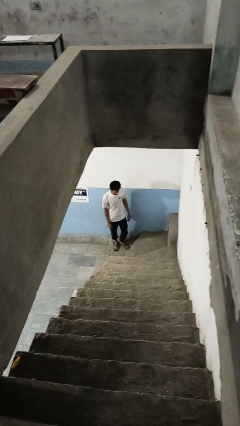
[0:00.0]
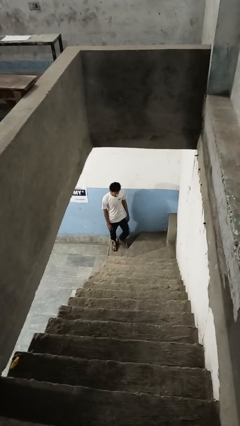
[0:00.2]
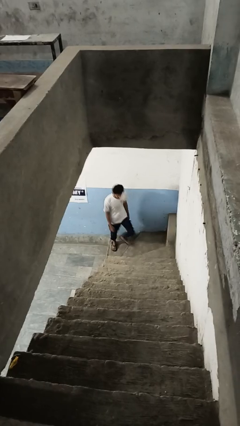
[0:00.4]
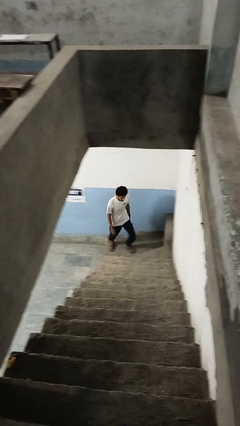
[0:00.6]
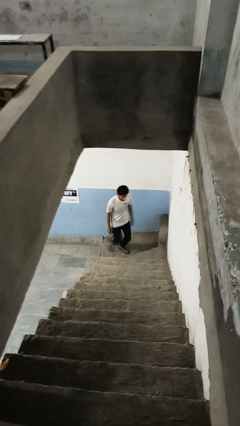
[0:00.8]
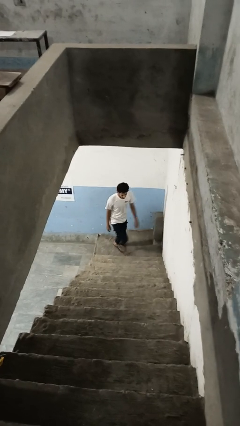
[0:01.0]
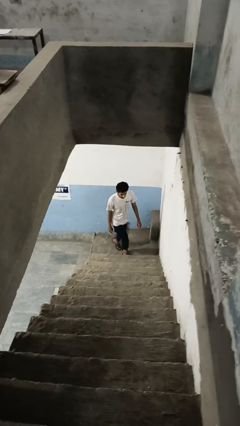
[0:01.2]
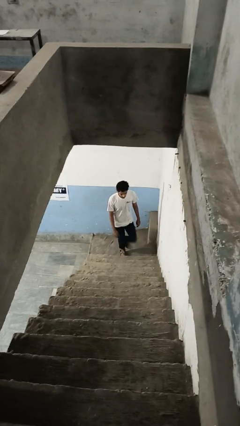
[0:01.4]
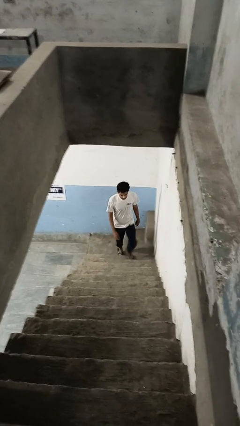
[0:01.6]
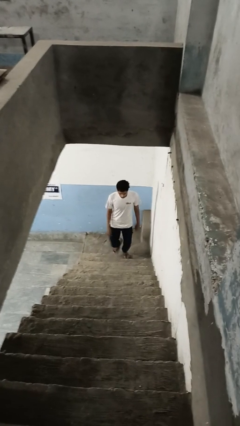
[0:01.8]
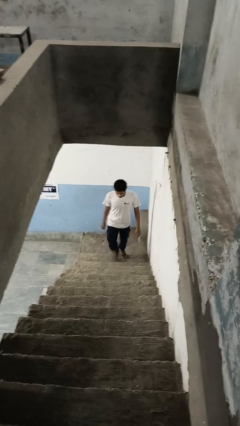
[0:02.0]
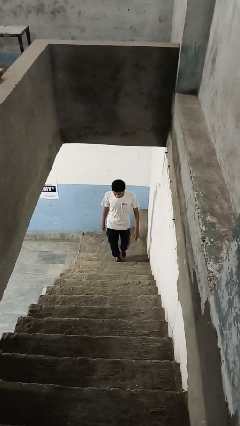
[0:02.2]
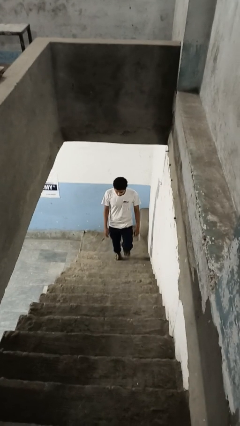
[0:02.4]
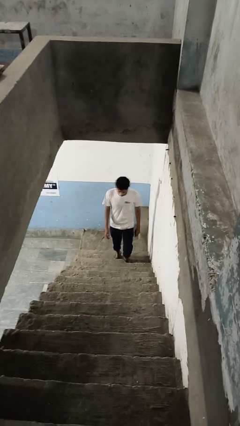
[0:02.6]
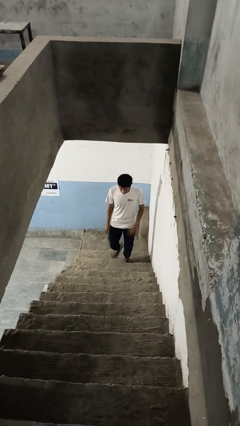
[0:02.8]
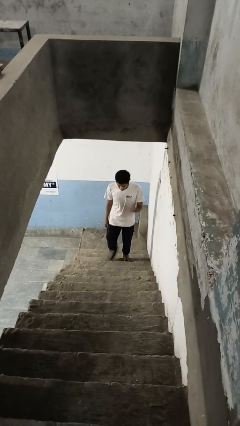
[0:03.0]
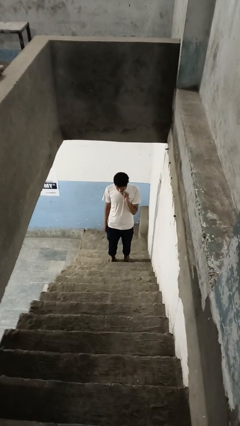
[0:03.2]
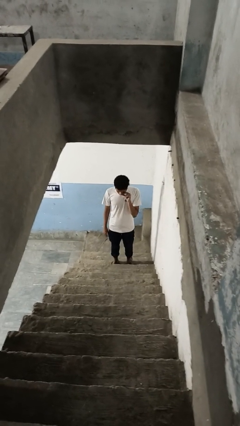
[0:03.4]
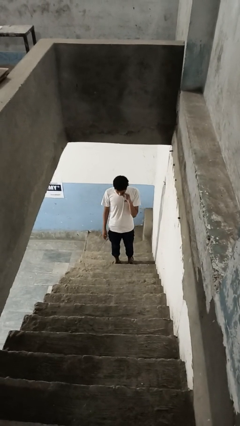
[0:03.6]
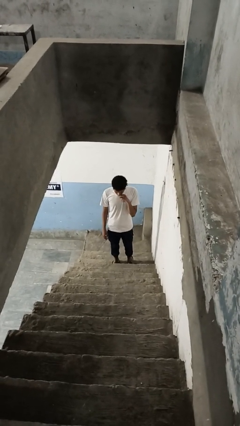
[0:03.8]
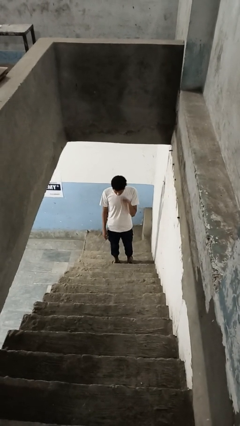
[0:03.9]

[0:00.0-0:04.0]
person climbs up stairs

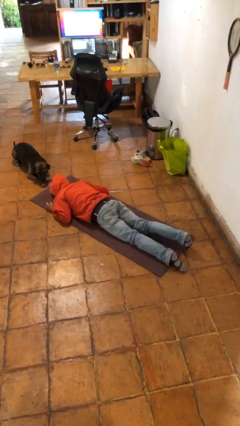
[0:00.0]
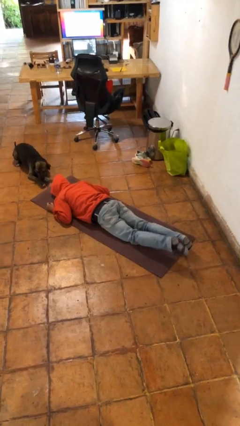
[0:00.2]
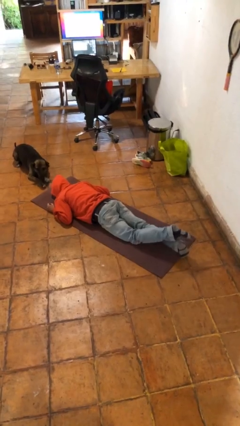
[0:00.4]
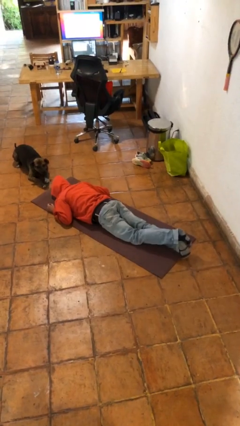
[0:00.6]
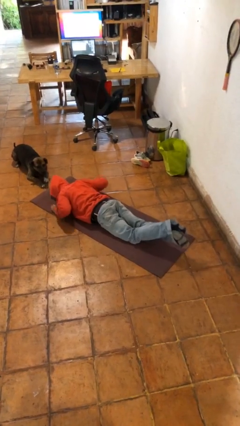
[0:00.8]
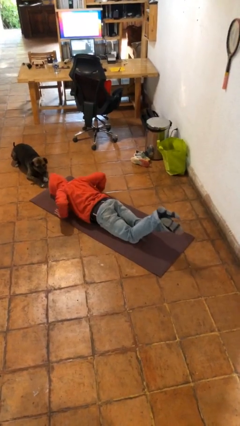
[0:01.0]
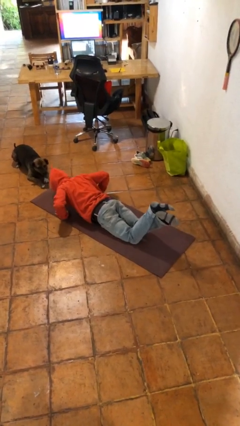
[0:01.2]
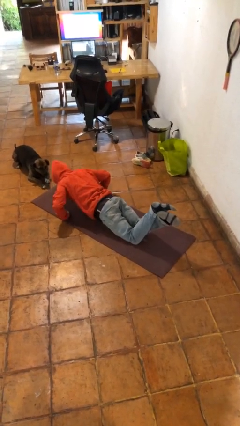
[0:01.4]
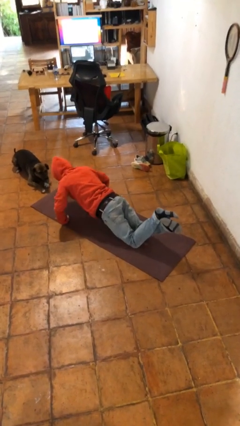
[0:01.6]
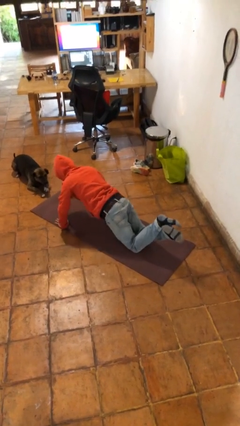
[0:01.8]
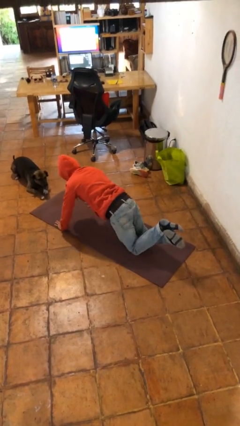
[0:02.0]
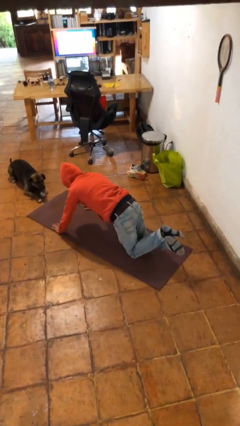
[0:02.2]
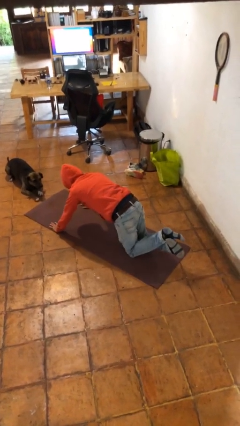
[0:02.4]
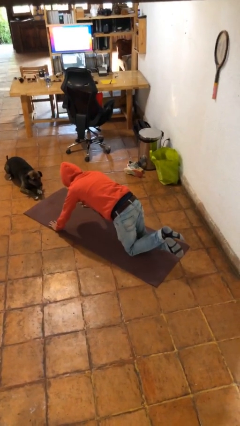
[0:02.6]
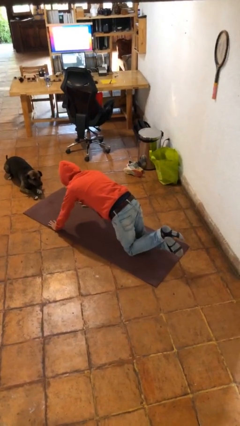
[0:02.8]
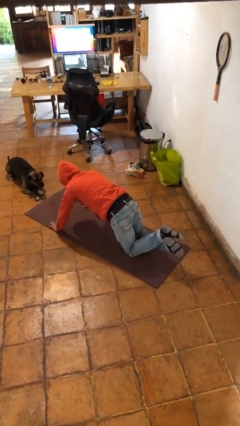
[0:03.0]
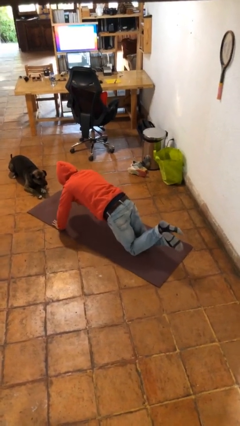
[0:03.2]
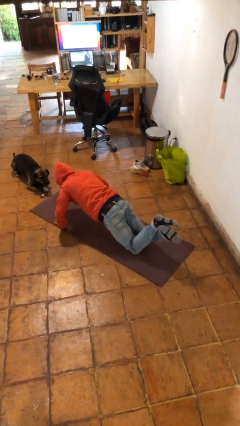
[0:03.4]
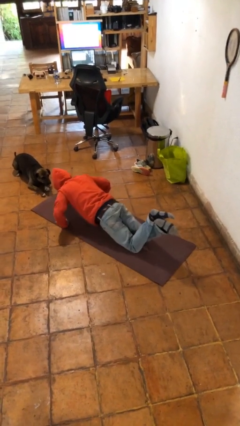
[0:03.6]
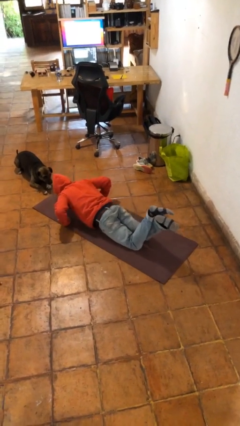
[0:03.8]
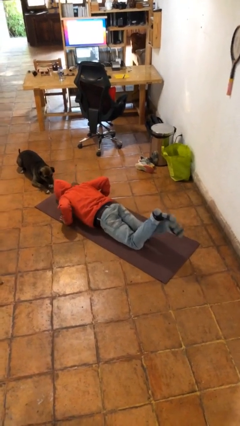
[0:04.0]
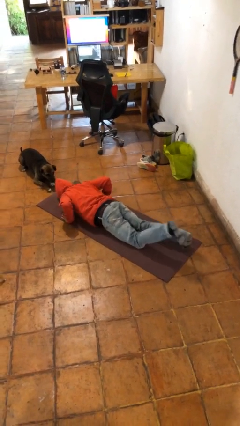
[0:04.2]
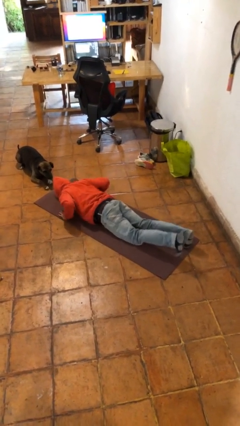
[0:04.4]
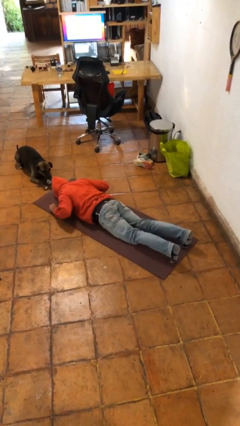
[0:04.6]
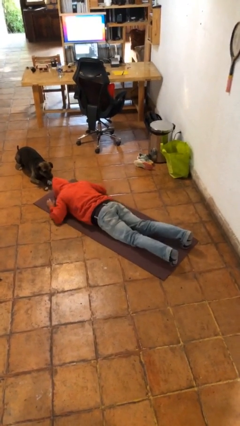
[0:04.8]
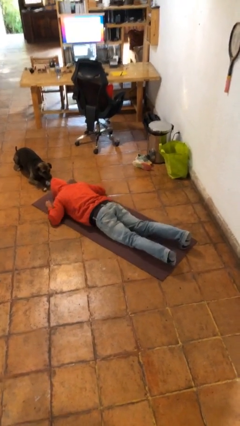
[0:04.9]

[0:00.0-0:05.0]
person exercises with pushup

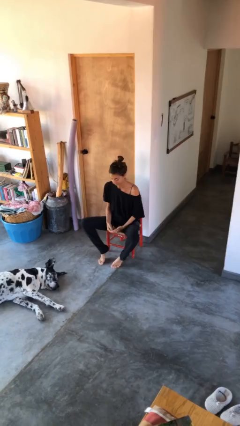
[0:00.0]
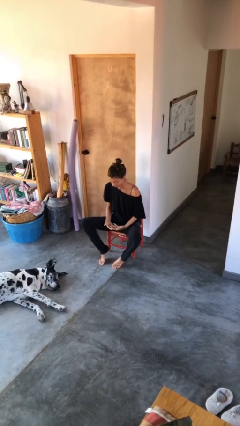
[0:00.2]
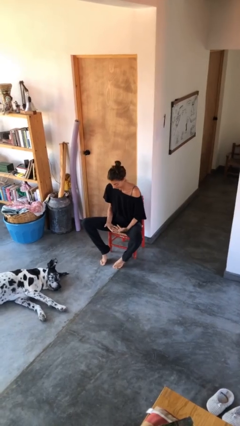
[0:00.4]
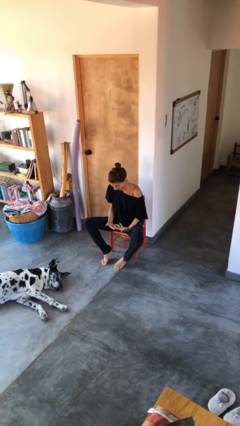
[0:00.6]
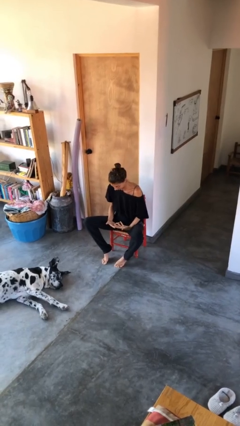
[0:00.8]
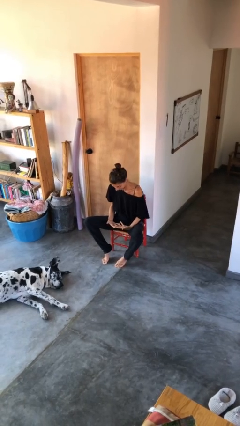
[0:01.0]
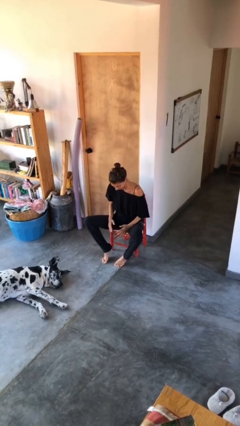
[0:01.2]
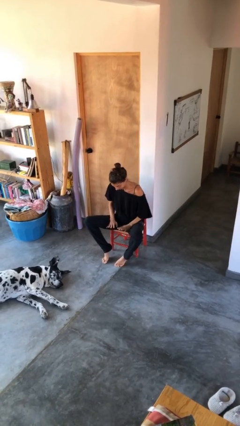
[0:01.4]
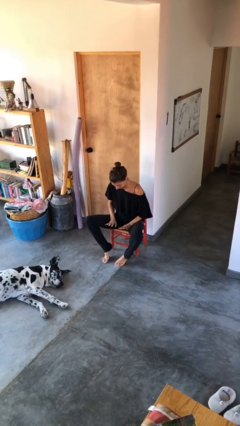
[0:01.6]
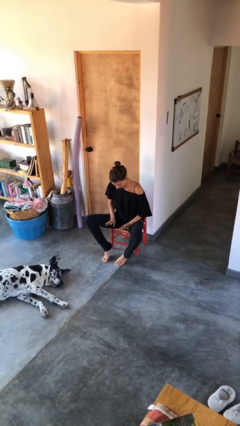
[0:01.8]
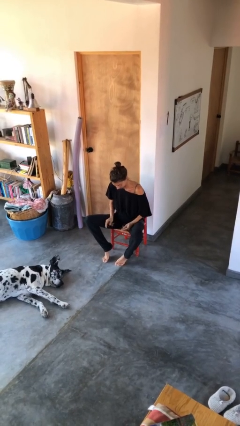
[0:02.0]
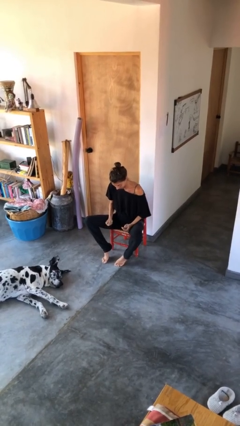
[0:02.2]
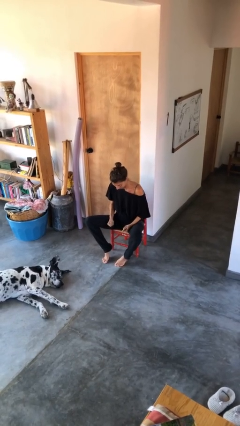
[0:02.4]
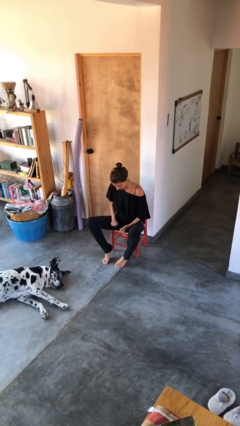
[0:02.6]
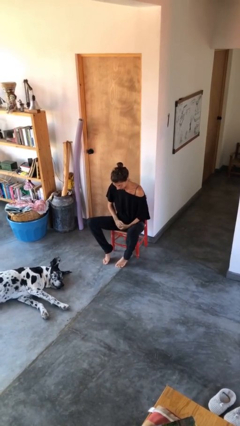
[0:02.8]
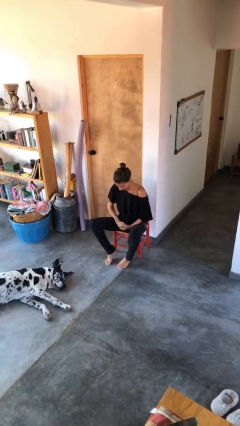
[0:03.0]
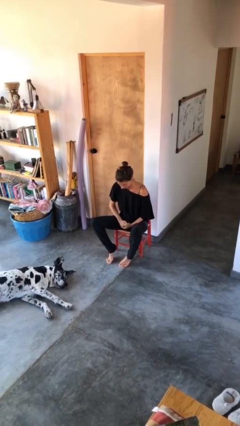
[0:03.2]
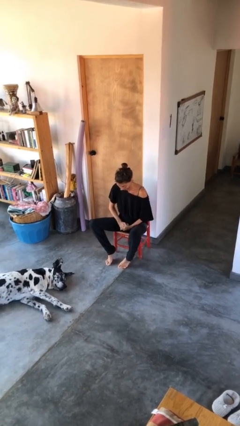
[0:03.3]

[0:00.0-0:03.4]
person looks at hands in lap

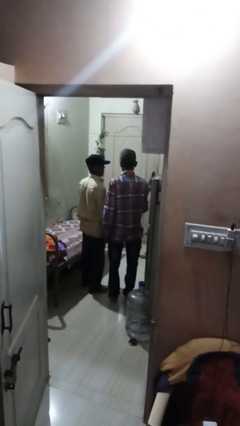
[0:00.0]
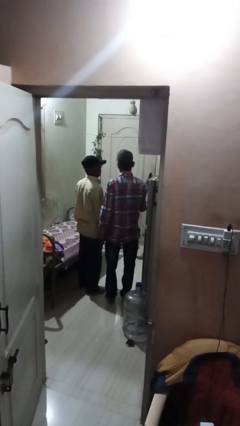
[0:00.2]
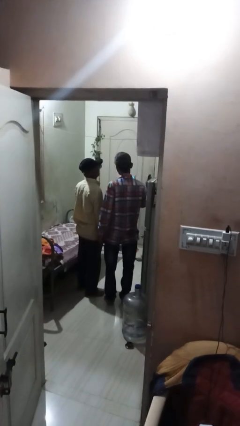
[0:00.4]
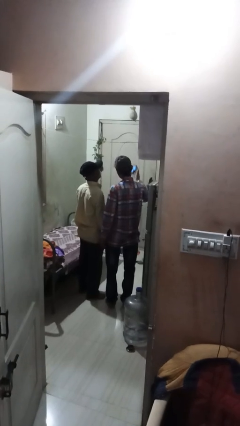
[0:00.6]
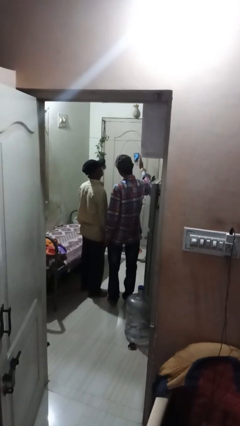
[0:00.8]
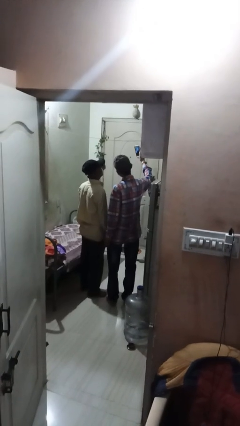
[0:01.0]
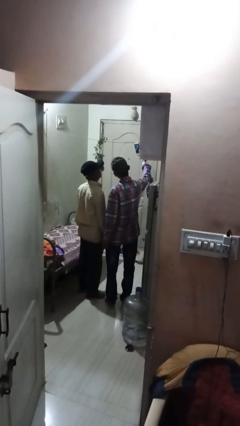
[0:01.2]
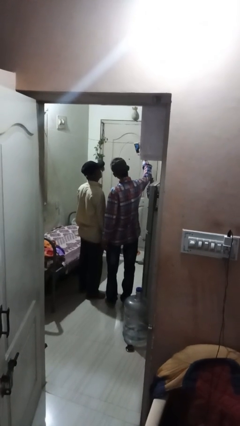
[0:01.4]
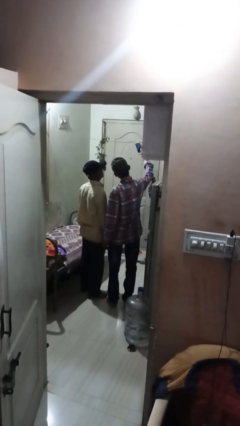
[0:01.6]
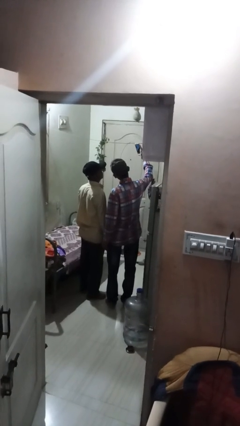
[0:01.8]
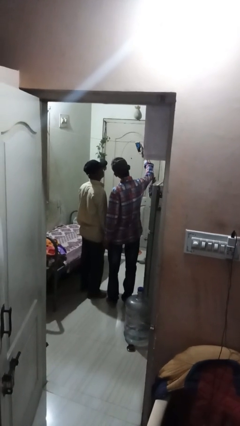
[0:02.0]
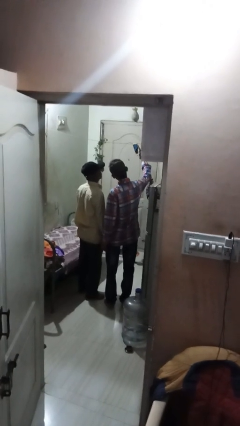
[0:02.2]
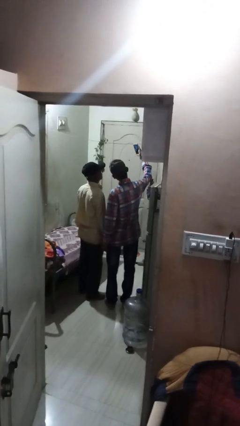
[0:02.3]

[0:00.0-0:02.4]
person takes selfie with person

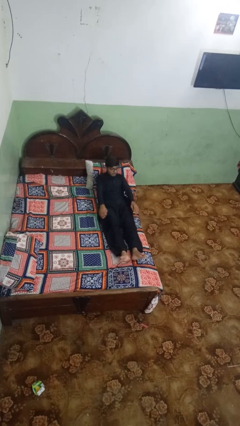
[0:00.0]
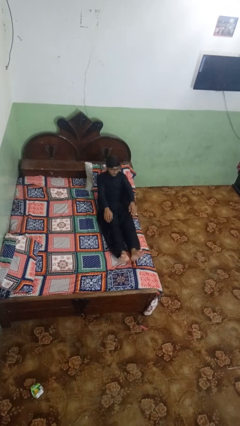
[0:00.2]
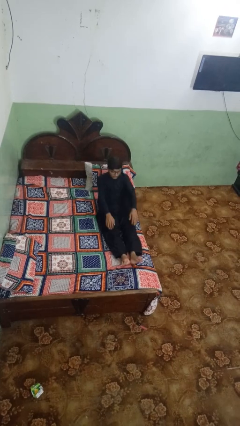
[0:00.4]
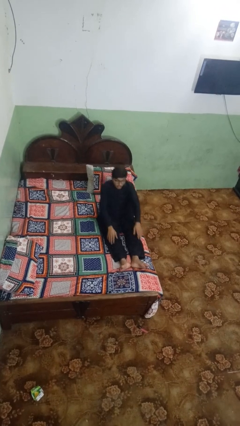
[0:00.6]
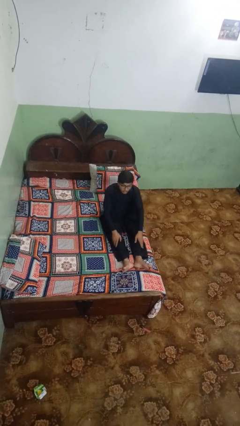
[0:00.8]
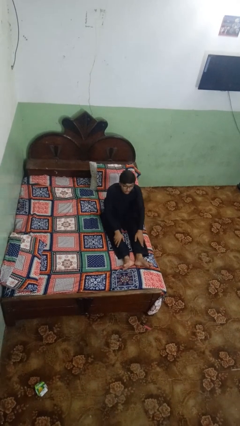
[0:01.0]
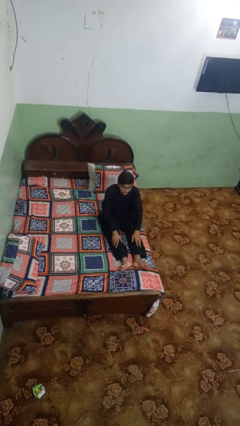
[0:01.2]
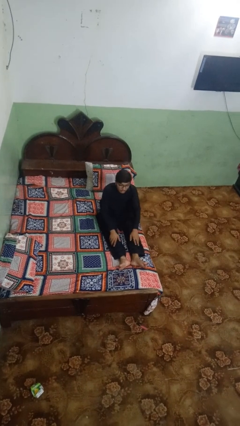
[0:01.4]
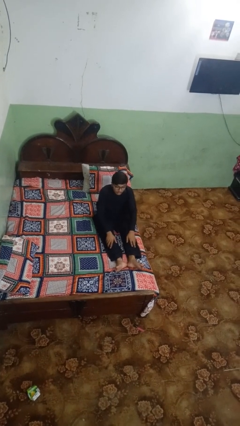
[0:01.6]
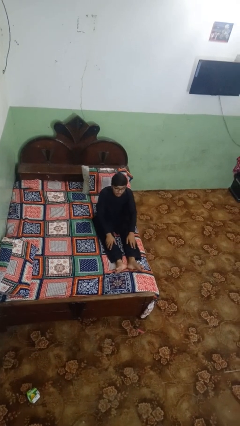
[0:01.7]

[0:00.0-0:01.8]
person stands up

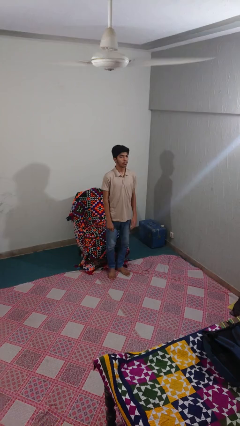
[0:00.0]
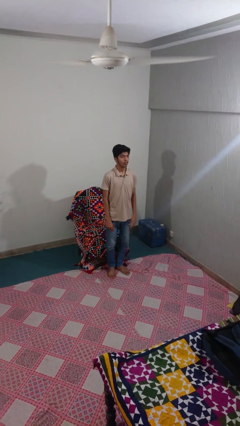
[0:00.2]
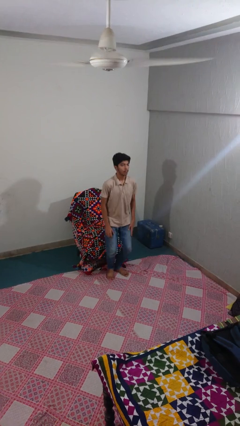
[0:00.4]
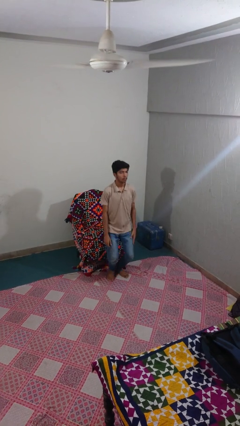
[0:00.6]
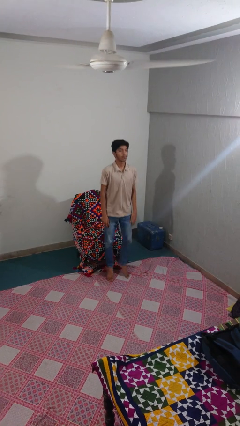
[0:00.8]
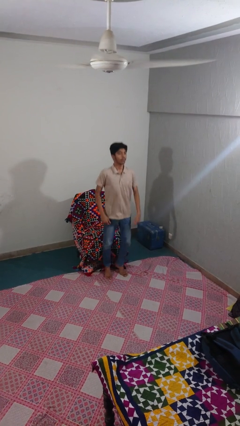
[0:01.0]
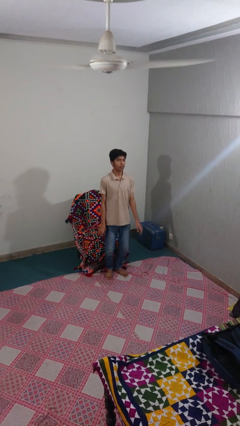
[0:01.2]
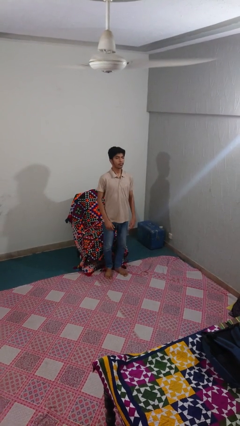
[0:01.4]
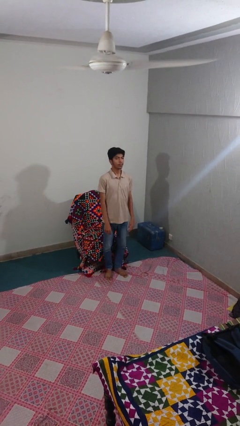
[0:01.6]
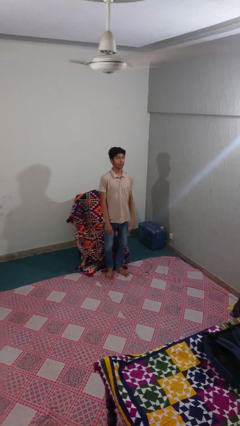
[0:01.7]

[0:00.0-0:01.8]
person jumps
